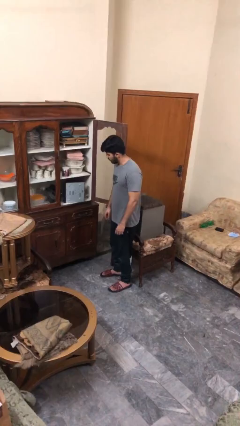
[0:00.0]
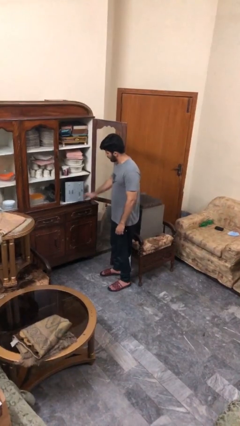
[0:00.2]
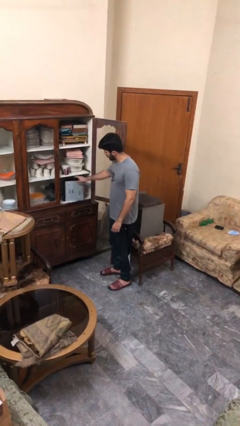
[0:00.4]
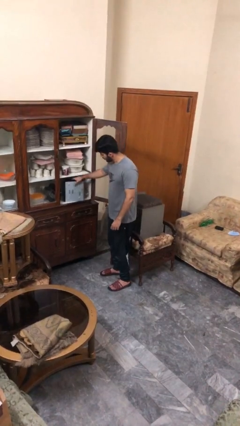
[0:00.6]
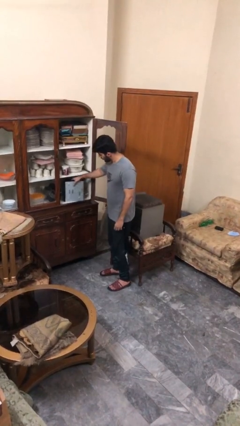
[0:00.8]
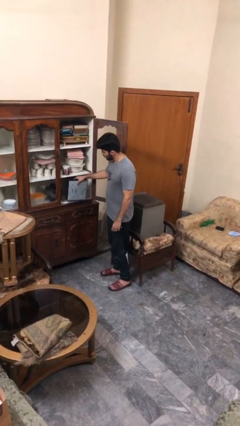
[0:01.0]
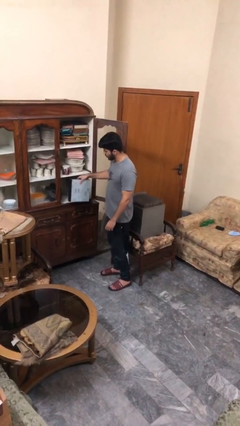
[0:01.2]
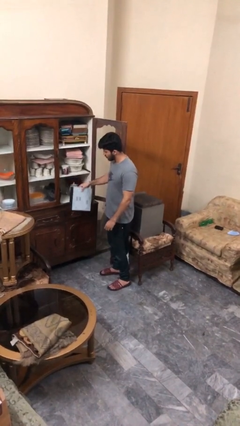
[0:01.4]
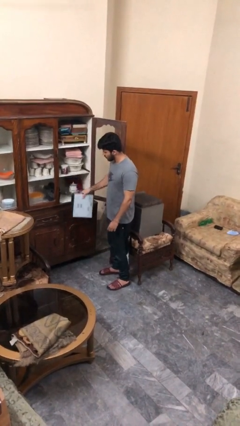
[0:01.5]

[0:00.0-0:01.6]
person picks up object from countertop

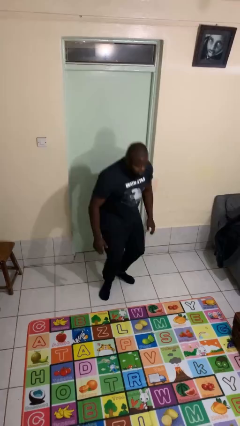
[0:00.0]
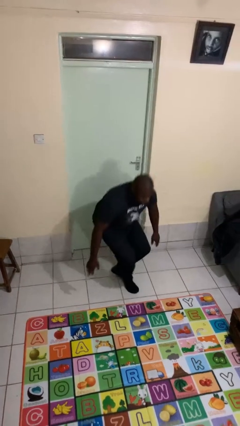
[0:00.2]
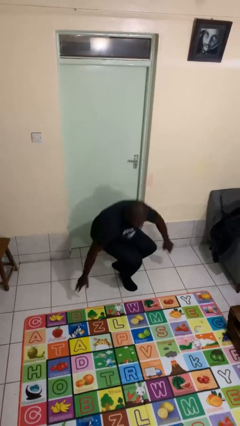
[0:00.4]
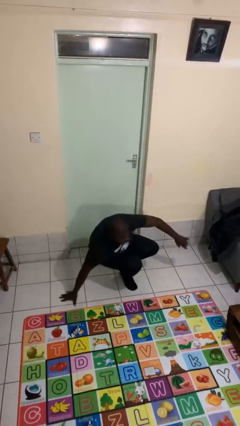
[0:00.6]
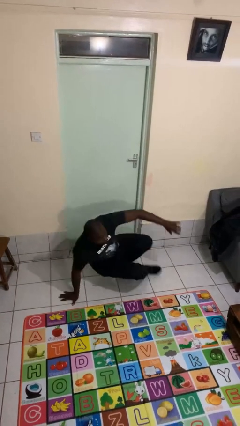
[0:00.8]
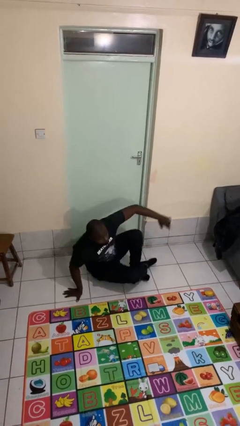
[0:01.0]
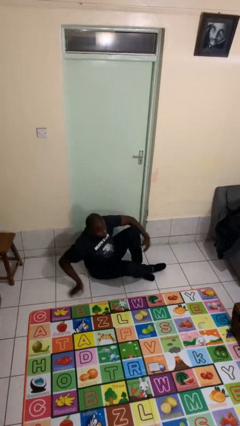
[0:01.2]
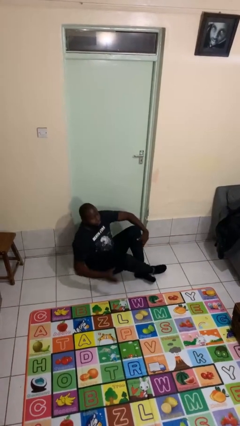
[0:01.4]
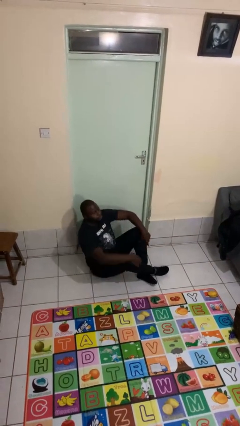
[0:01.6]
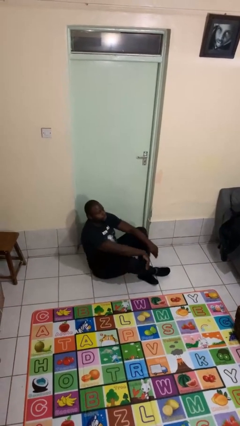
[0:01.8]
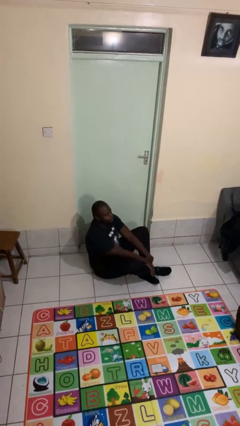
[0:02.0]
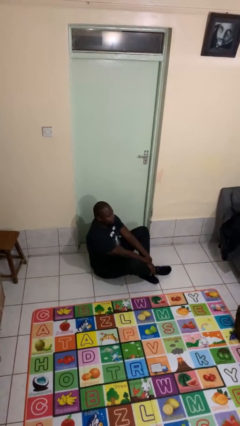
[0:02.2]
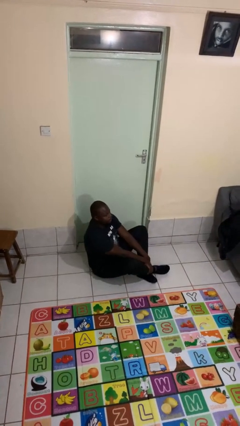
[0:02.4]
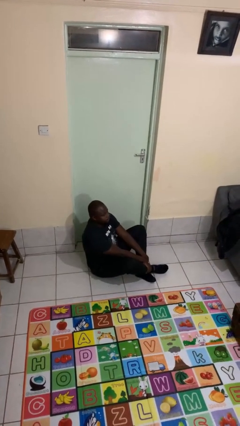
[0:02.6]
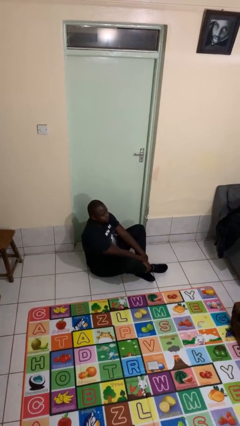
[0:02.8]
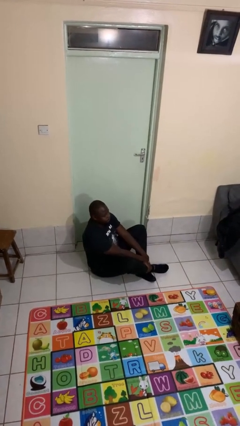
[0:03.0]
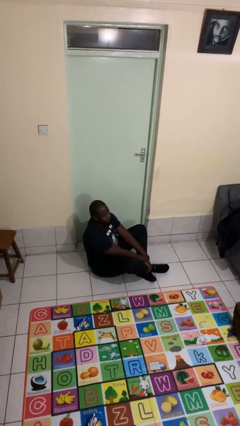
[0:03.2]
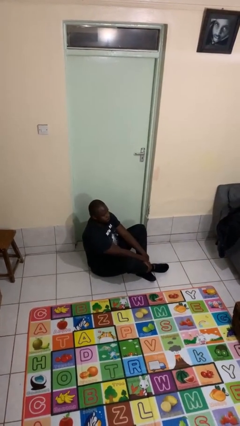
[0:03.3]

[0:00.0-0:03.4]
person sits crisscross

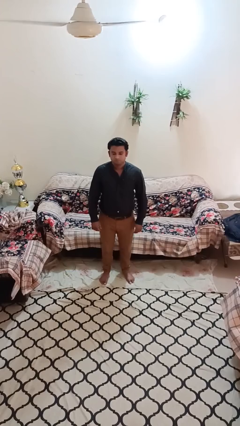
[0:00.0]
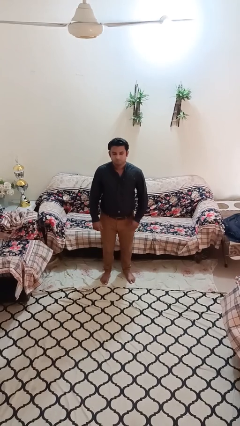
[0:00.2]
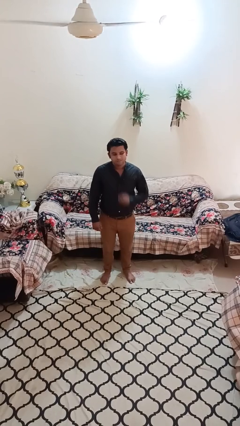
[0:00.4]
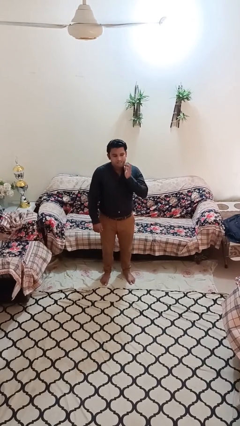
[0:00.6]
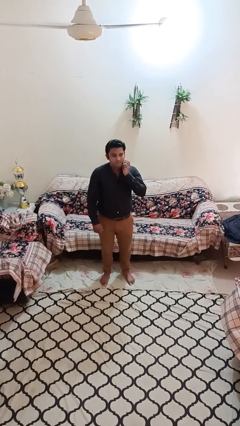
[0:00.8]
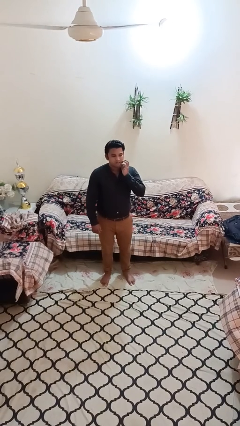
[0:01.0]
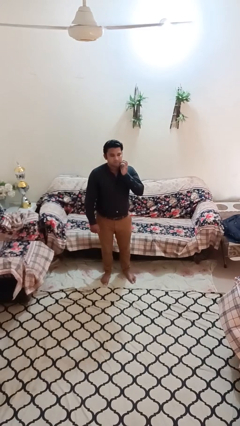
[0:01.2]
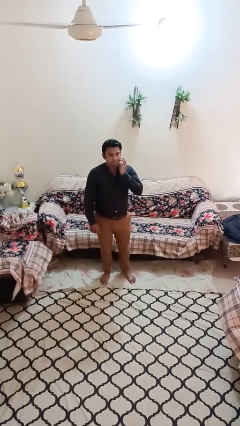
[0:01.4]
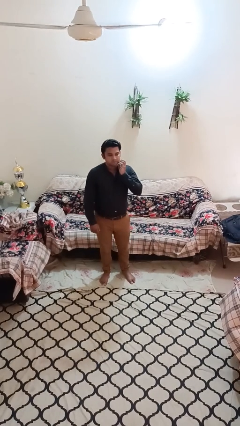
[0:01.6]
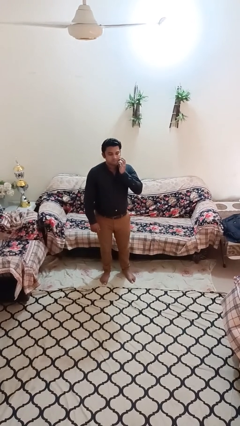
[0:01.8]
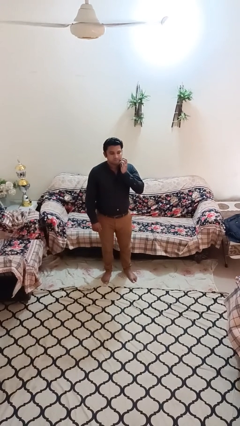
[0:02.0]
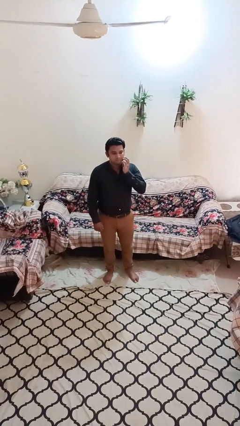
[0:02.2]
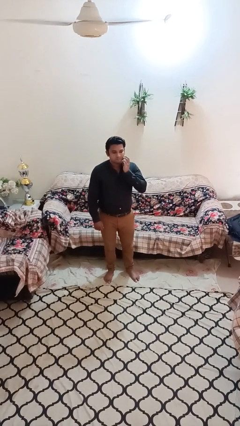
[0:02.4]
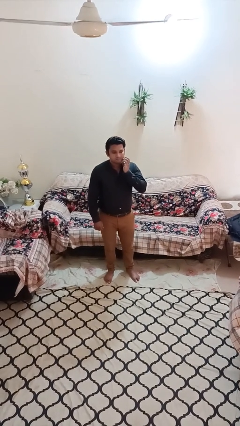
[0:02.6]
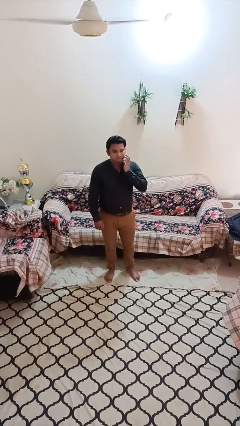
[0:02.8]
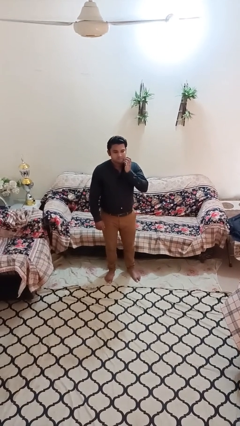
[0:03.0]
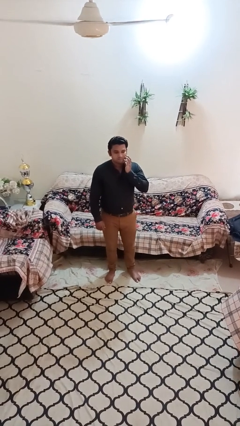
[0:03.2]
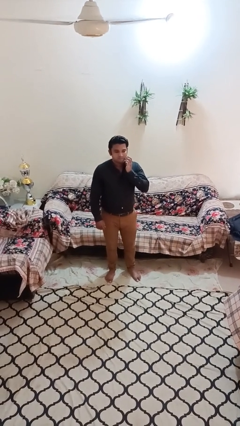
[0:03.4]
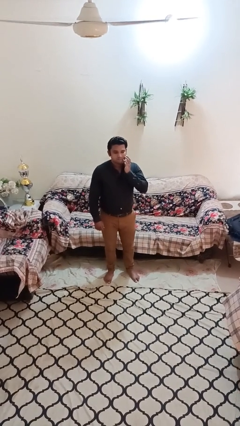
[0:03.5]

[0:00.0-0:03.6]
person scratches face

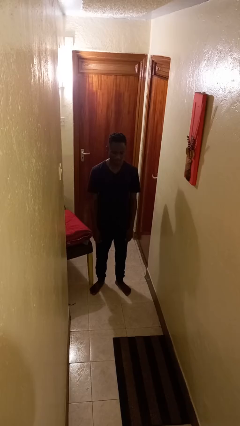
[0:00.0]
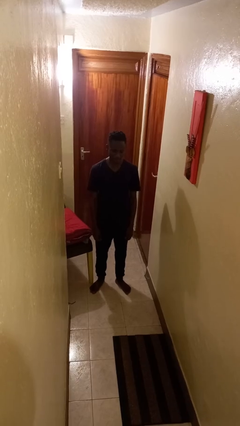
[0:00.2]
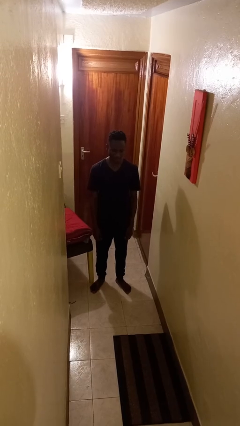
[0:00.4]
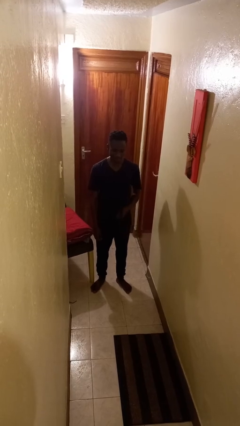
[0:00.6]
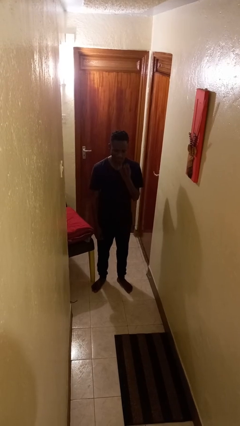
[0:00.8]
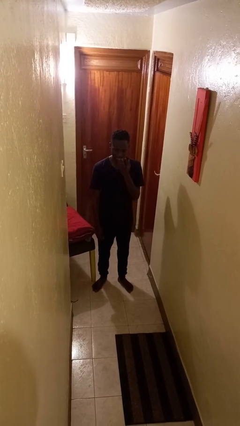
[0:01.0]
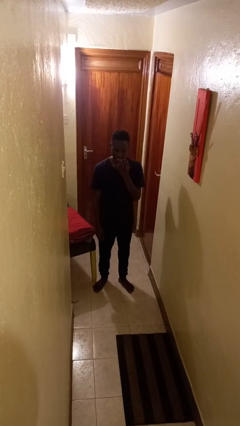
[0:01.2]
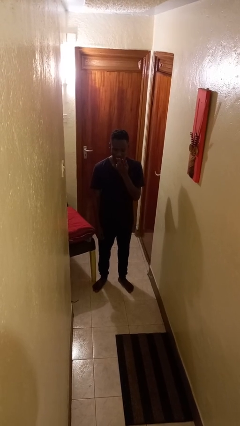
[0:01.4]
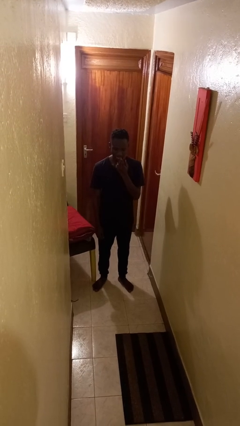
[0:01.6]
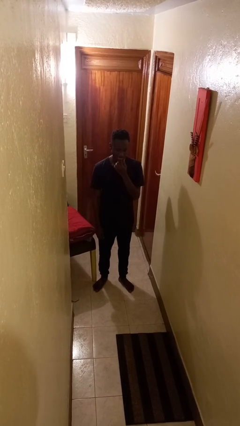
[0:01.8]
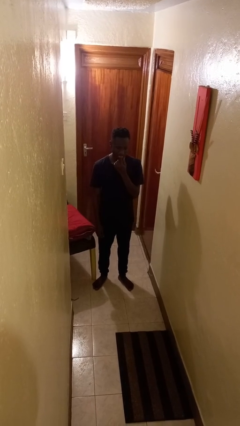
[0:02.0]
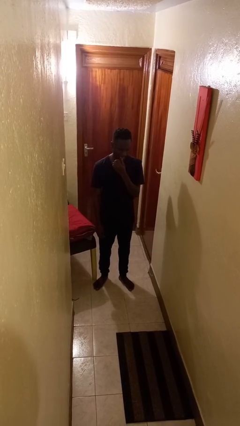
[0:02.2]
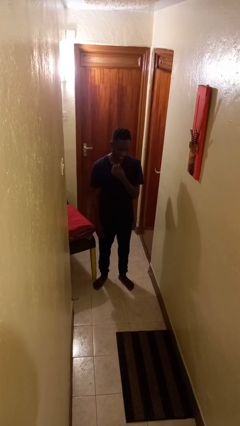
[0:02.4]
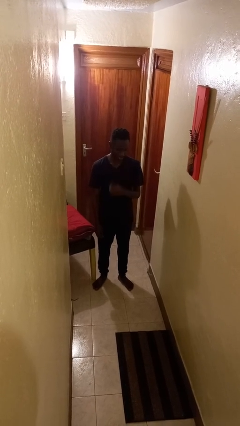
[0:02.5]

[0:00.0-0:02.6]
person licks fingers

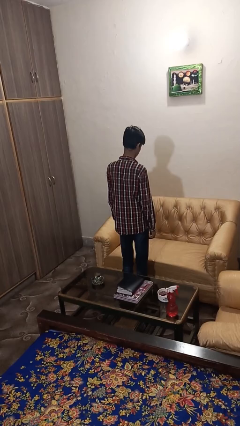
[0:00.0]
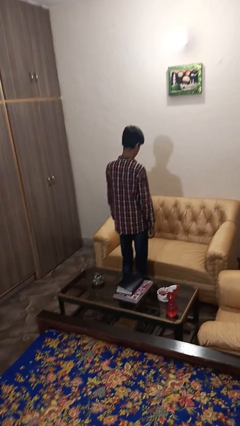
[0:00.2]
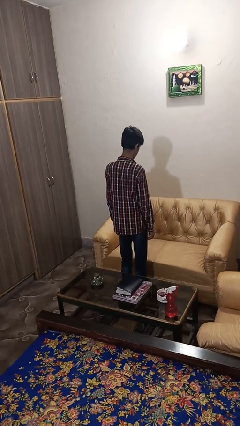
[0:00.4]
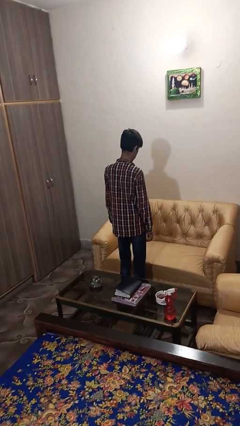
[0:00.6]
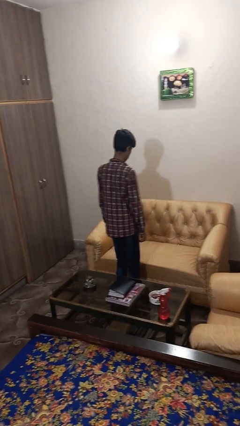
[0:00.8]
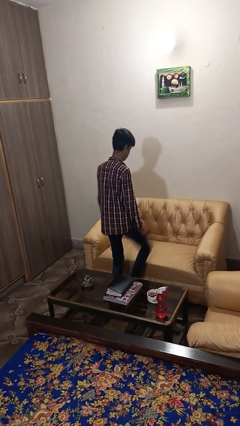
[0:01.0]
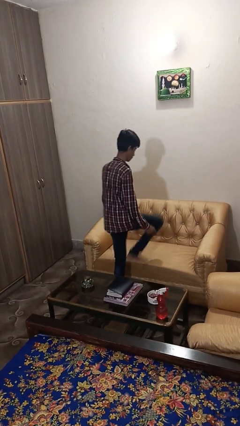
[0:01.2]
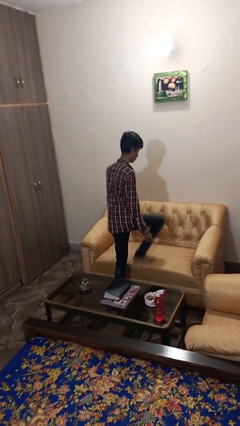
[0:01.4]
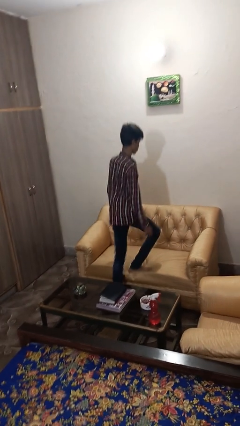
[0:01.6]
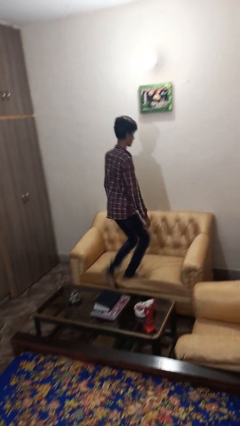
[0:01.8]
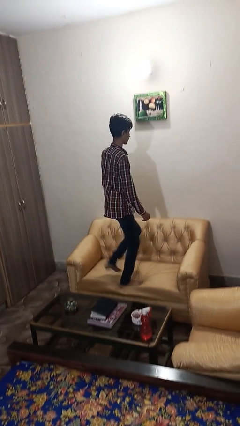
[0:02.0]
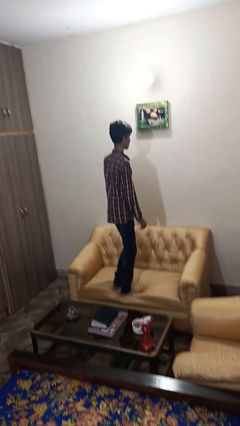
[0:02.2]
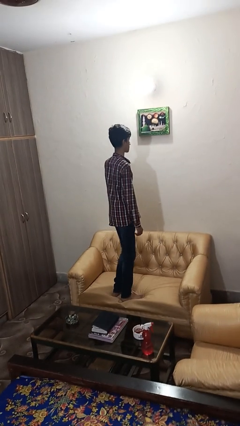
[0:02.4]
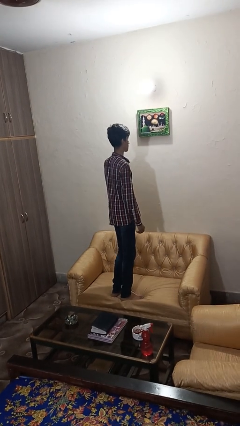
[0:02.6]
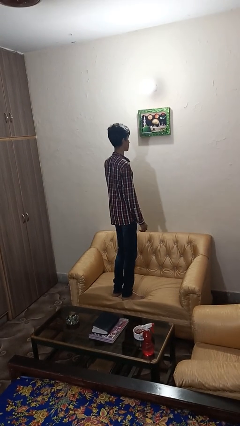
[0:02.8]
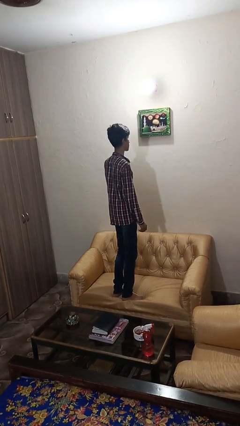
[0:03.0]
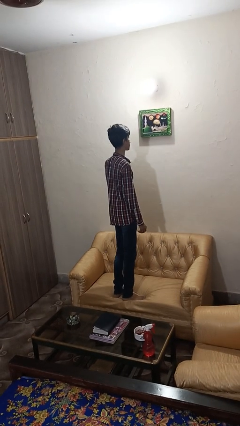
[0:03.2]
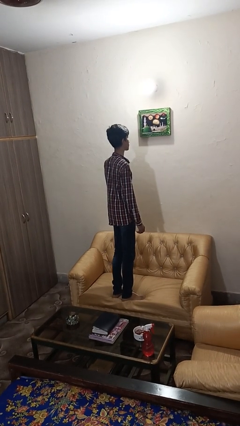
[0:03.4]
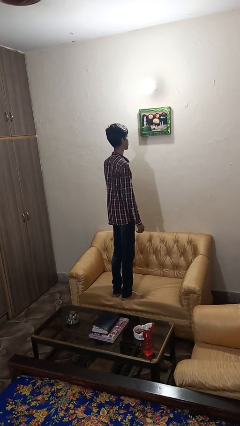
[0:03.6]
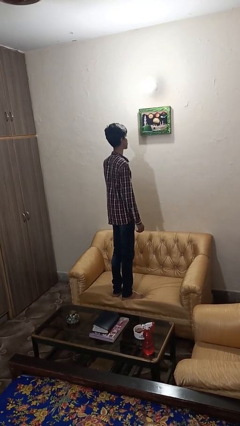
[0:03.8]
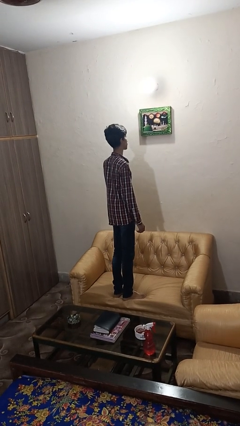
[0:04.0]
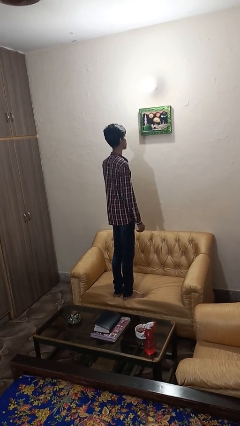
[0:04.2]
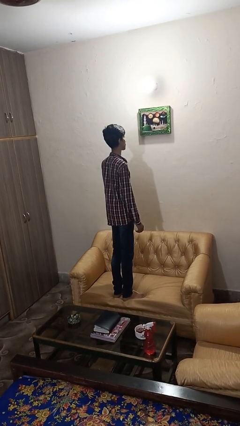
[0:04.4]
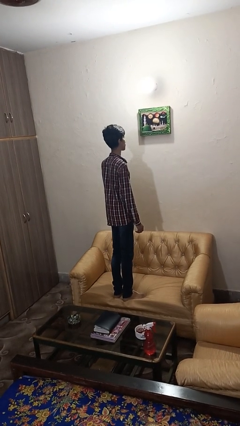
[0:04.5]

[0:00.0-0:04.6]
person climbs on couch

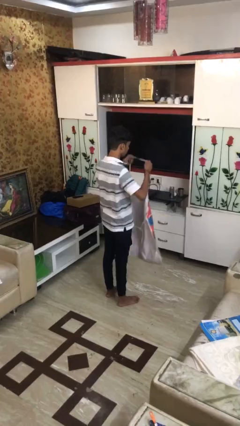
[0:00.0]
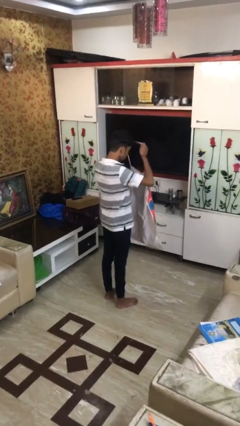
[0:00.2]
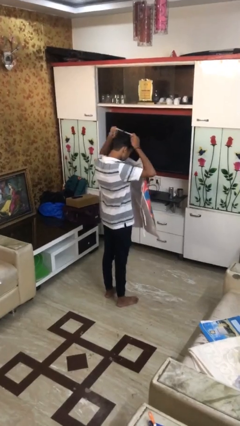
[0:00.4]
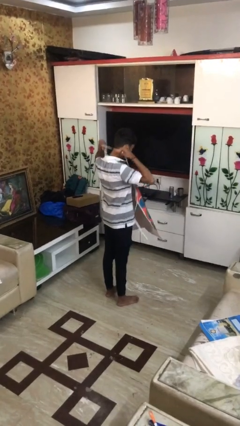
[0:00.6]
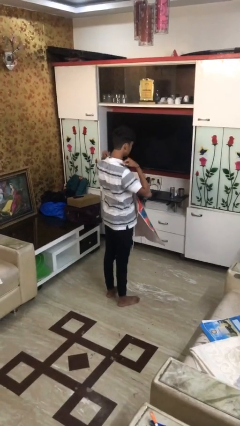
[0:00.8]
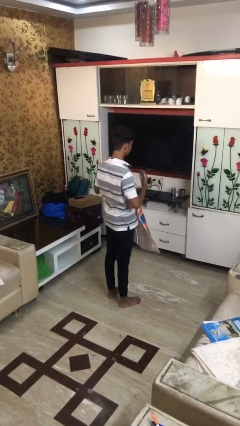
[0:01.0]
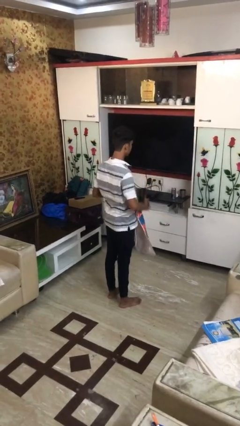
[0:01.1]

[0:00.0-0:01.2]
person puts on apron

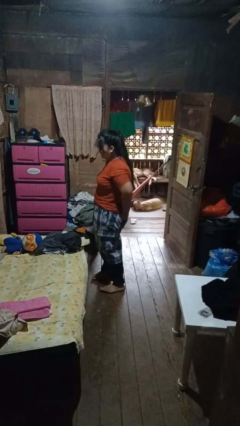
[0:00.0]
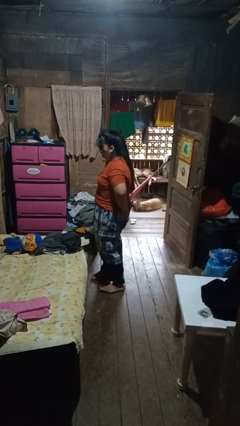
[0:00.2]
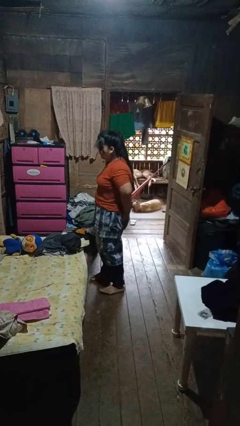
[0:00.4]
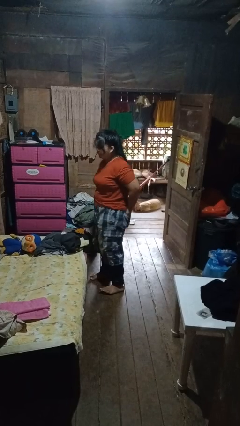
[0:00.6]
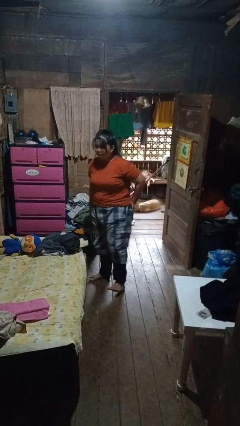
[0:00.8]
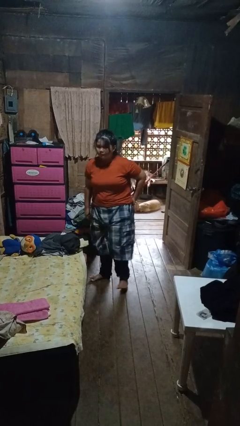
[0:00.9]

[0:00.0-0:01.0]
person puts hands in back pockets
